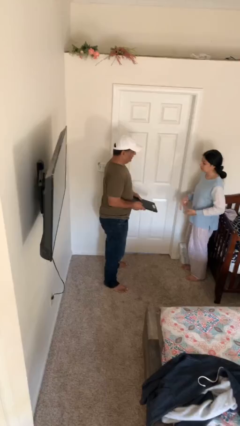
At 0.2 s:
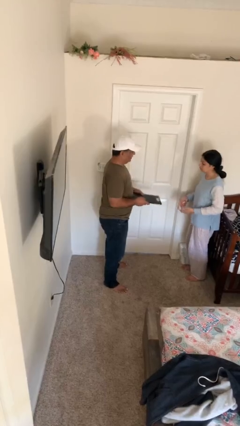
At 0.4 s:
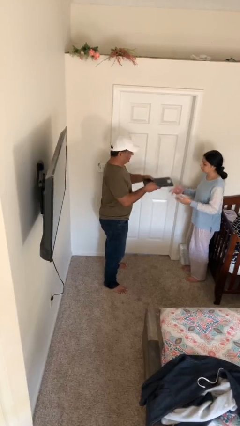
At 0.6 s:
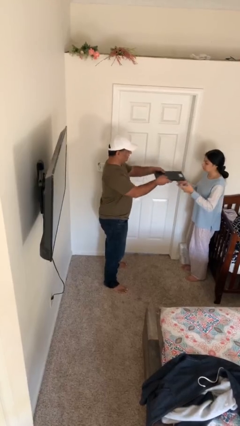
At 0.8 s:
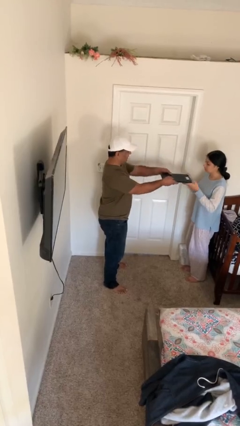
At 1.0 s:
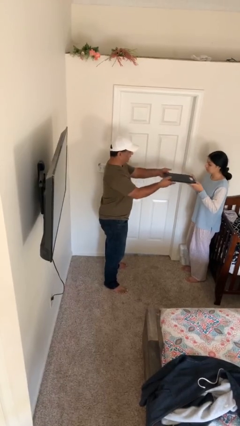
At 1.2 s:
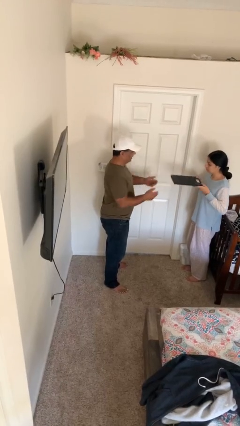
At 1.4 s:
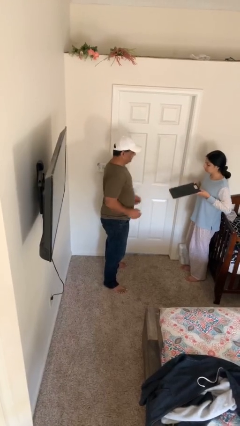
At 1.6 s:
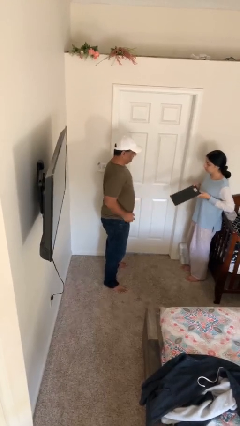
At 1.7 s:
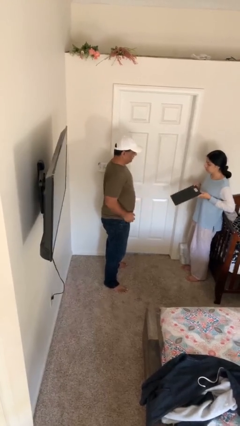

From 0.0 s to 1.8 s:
person transfers object to person

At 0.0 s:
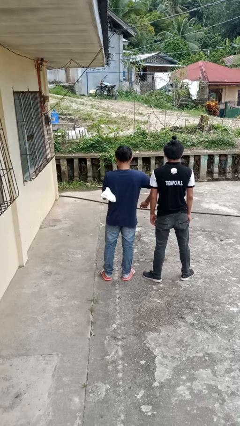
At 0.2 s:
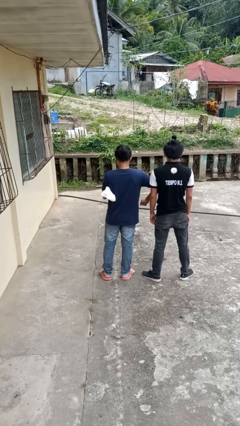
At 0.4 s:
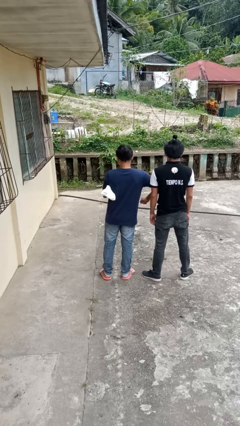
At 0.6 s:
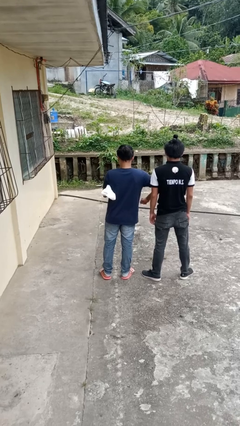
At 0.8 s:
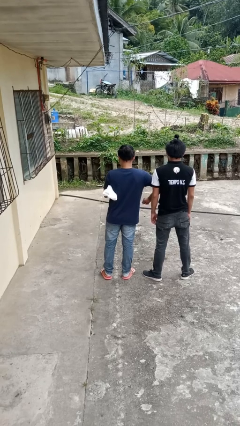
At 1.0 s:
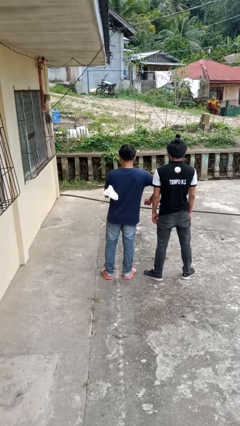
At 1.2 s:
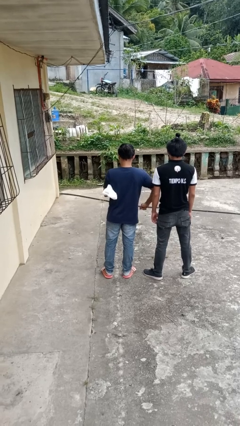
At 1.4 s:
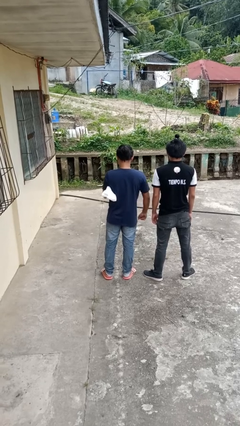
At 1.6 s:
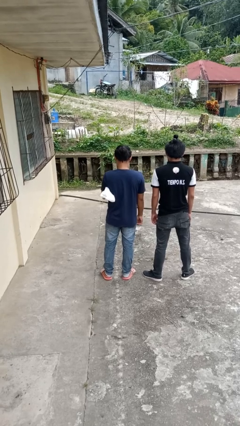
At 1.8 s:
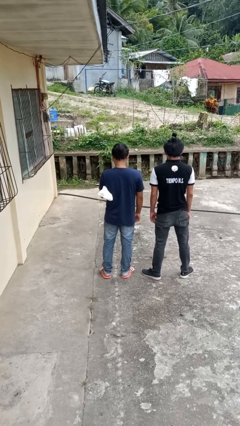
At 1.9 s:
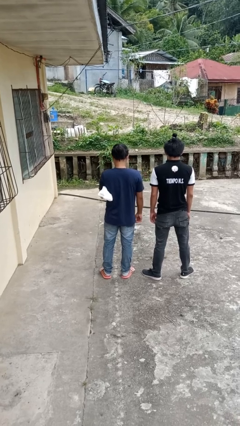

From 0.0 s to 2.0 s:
person nudges person with elbow

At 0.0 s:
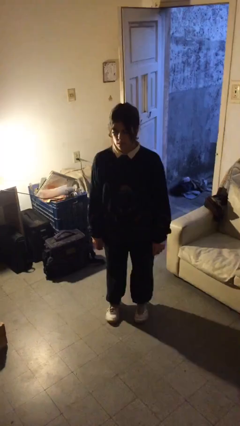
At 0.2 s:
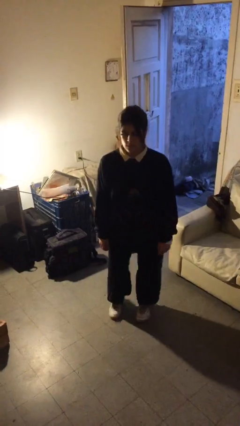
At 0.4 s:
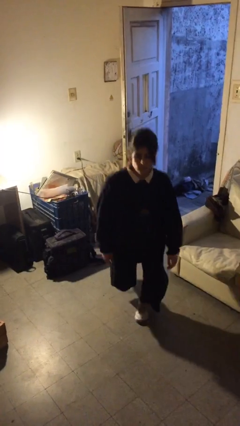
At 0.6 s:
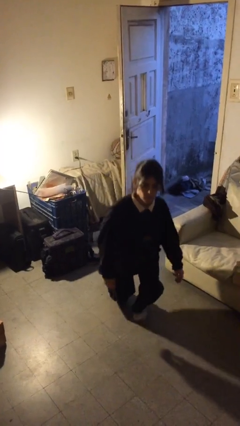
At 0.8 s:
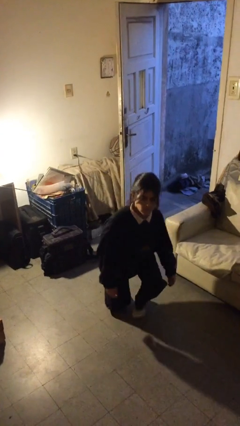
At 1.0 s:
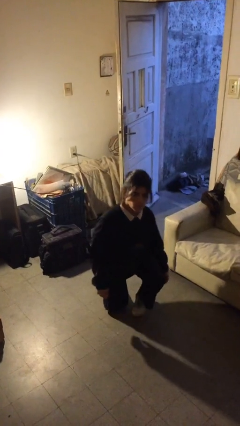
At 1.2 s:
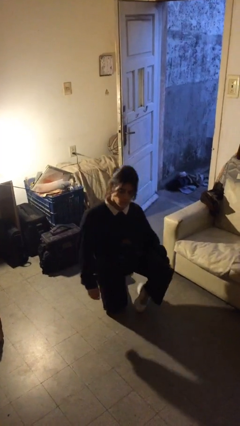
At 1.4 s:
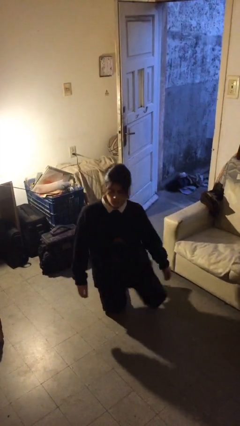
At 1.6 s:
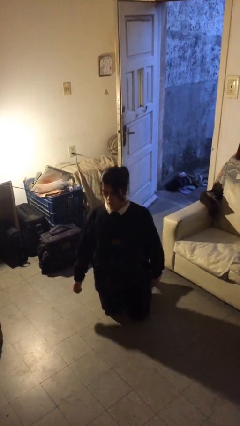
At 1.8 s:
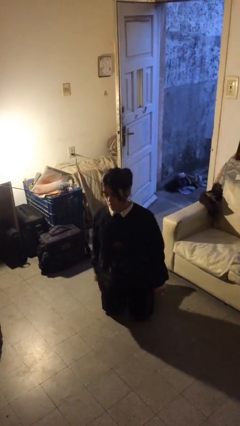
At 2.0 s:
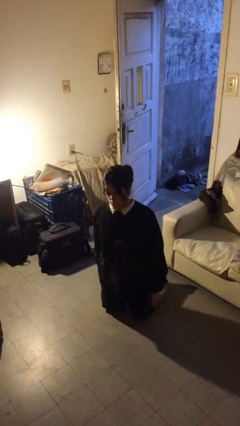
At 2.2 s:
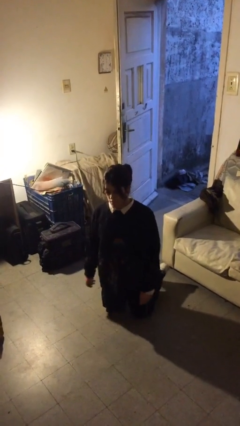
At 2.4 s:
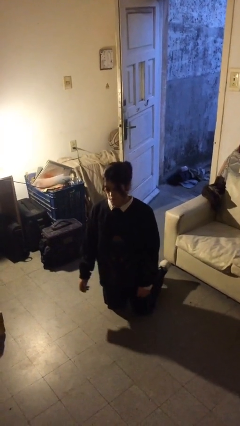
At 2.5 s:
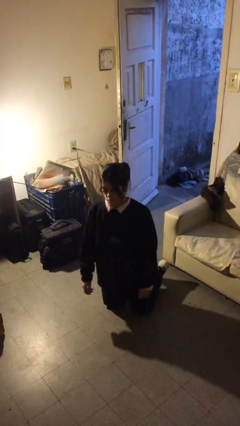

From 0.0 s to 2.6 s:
person kneels

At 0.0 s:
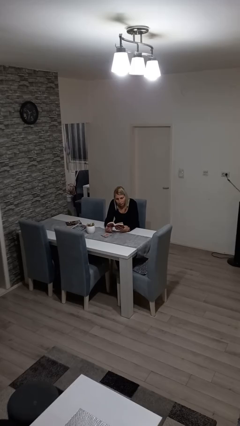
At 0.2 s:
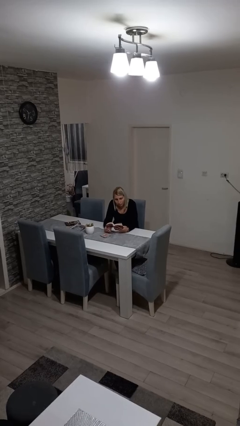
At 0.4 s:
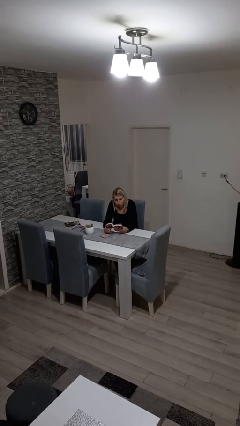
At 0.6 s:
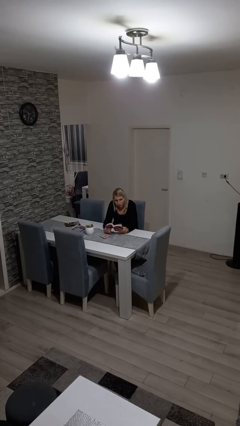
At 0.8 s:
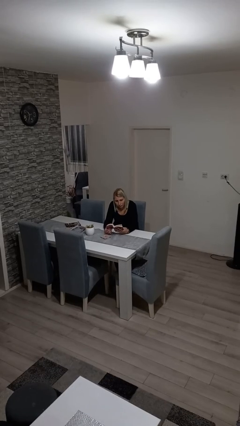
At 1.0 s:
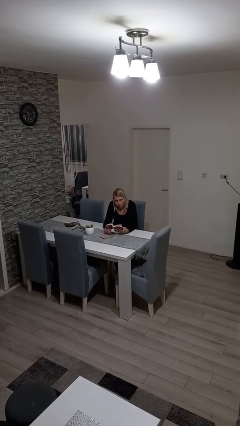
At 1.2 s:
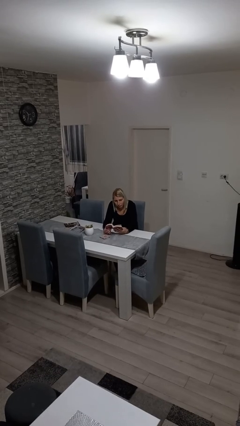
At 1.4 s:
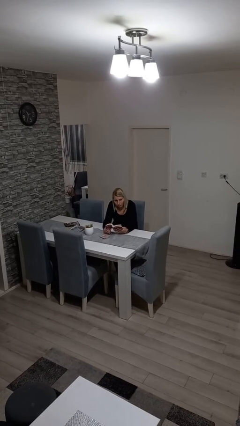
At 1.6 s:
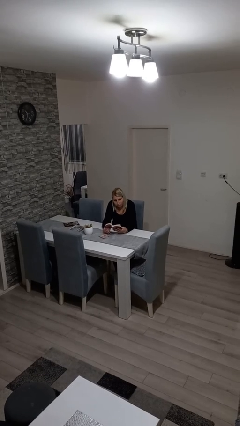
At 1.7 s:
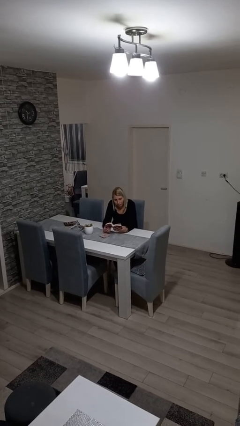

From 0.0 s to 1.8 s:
person reads book

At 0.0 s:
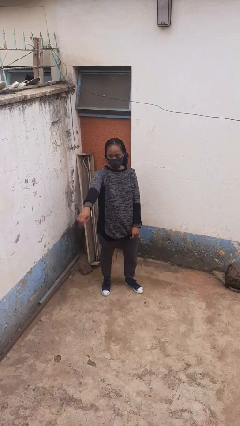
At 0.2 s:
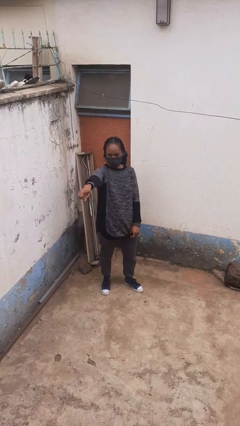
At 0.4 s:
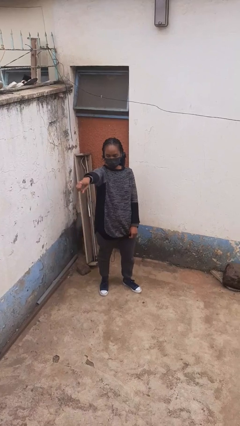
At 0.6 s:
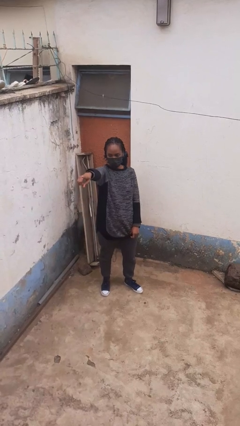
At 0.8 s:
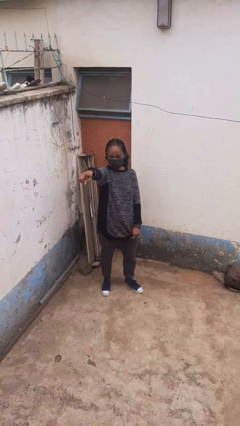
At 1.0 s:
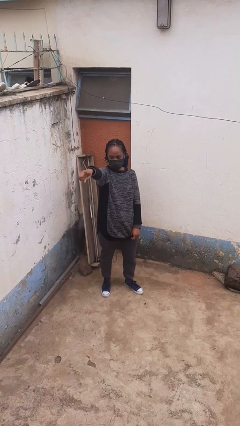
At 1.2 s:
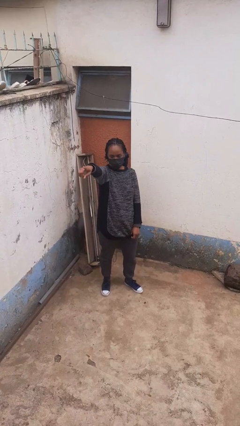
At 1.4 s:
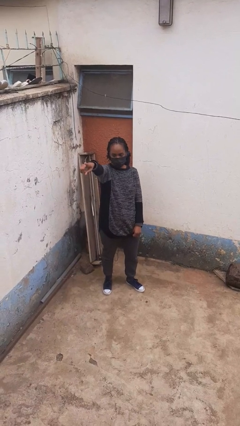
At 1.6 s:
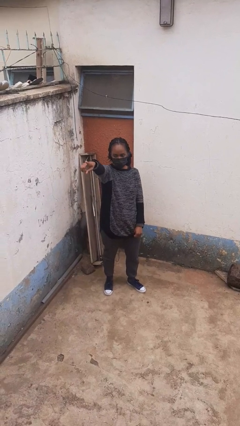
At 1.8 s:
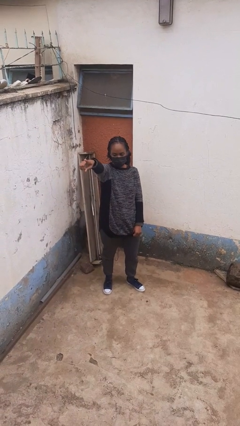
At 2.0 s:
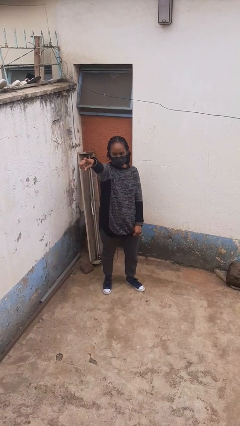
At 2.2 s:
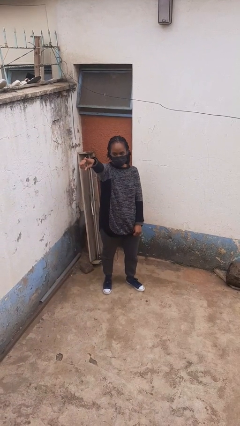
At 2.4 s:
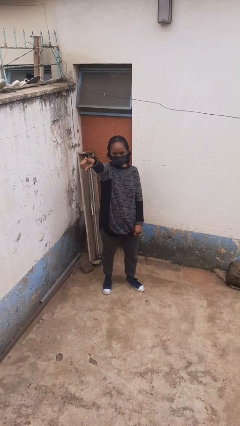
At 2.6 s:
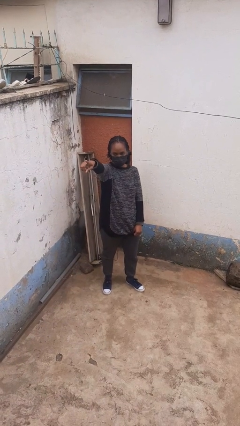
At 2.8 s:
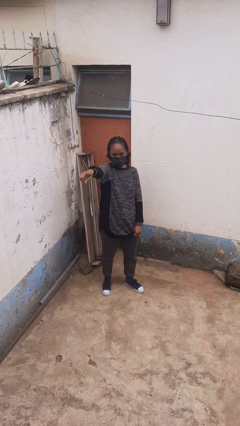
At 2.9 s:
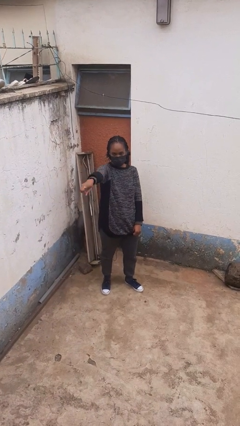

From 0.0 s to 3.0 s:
person points at person

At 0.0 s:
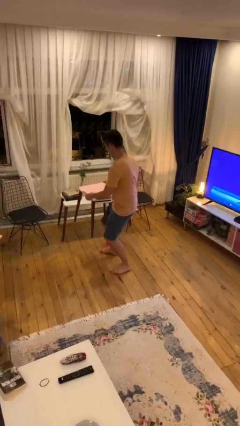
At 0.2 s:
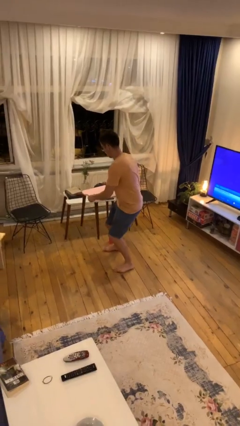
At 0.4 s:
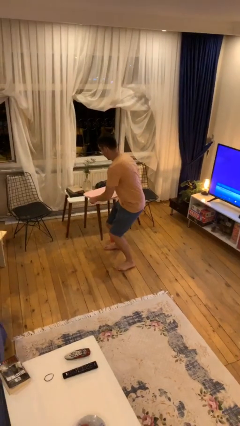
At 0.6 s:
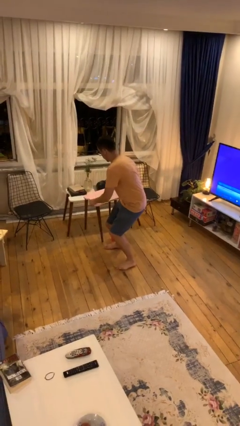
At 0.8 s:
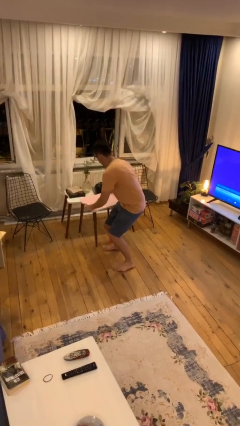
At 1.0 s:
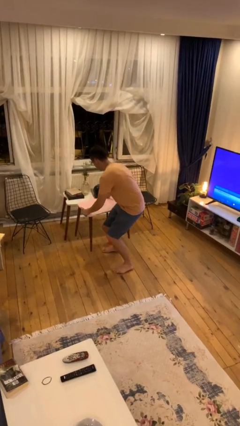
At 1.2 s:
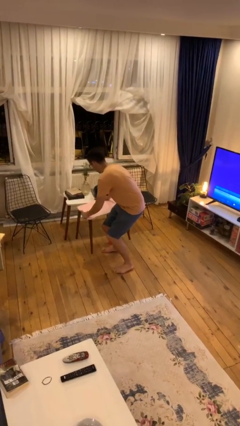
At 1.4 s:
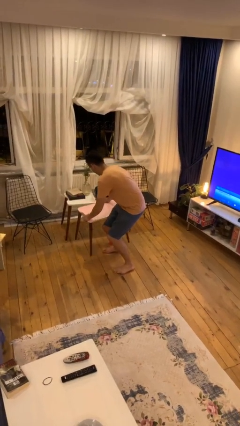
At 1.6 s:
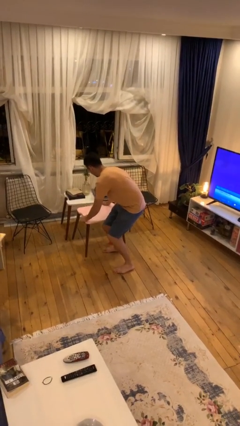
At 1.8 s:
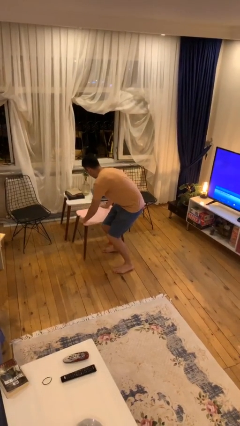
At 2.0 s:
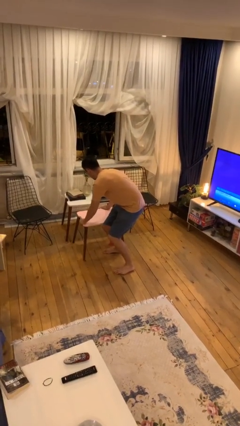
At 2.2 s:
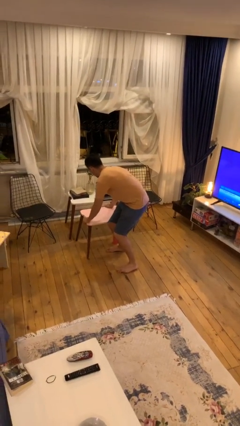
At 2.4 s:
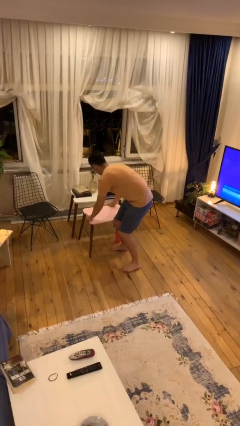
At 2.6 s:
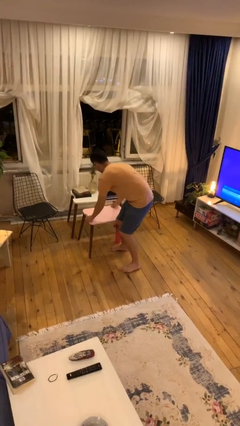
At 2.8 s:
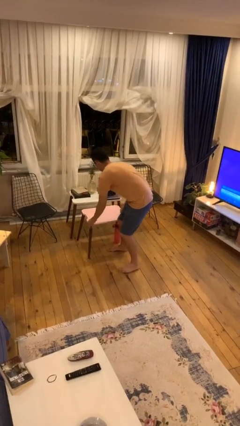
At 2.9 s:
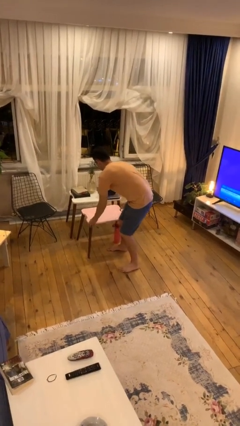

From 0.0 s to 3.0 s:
person puts down object on floor

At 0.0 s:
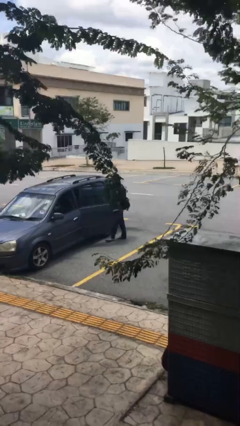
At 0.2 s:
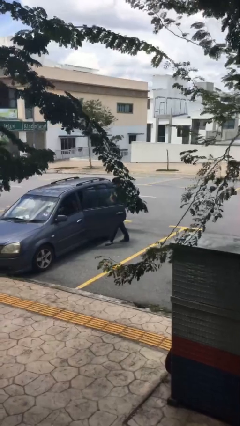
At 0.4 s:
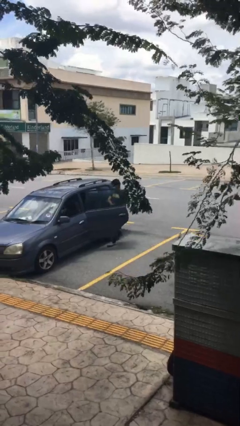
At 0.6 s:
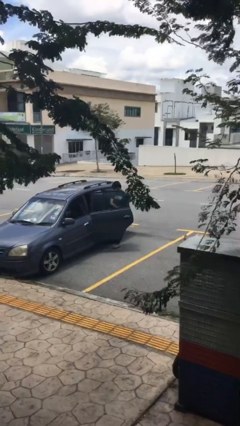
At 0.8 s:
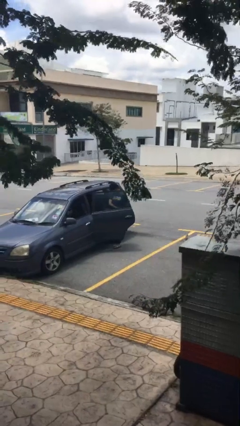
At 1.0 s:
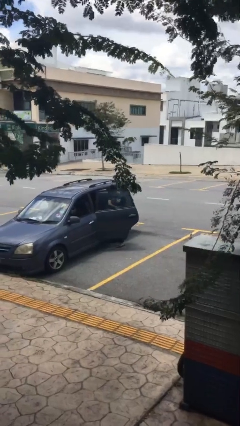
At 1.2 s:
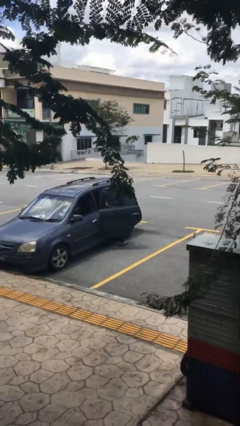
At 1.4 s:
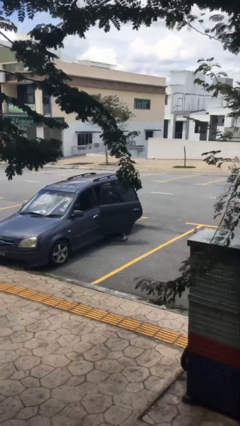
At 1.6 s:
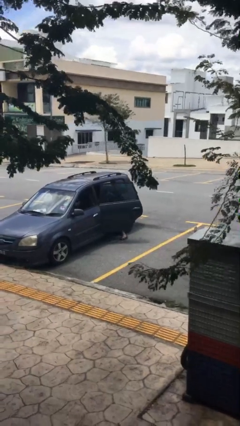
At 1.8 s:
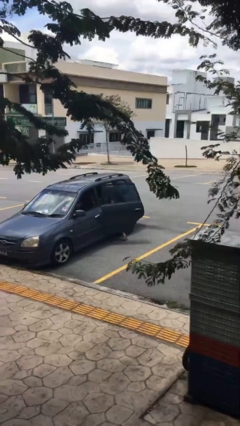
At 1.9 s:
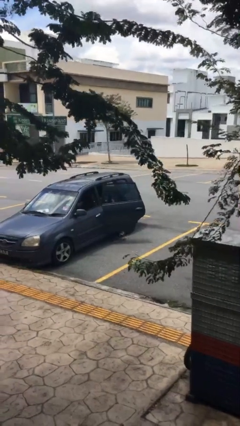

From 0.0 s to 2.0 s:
person enters car

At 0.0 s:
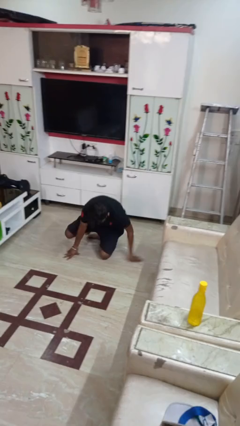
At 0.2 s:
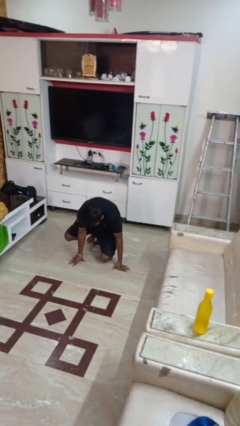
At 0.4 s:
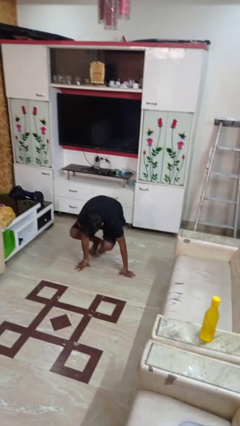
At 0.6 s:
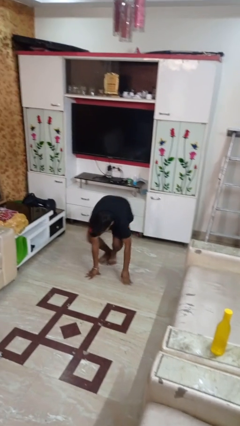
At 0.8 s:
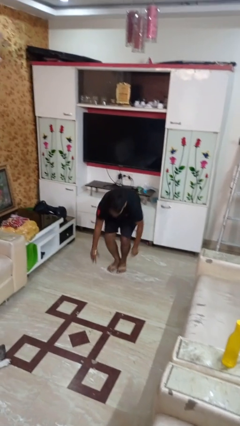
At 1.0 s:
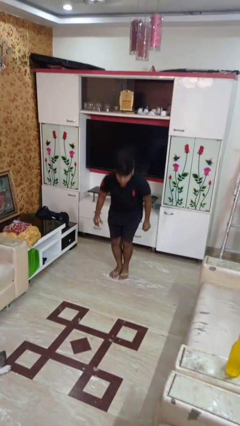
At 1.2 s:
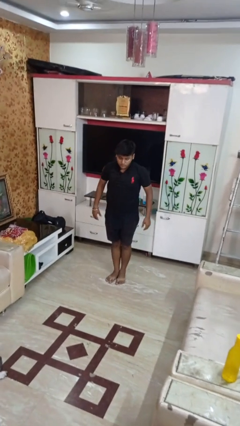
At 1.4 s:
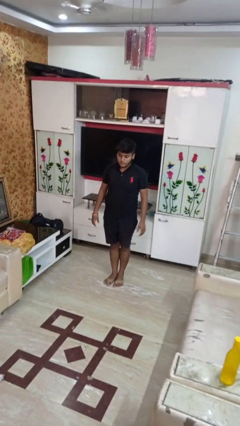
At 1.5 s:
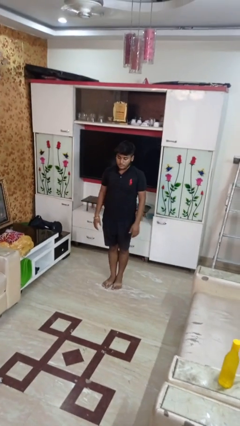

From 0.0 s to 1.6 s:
person stands up from floor
